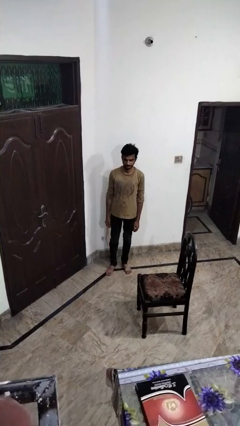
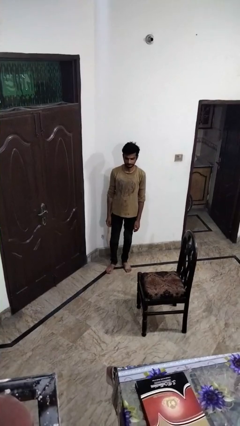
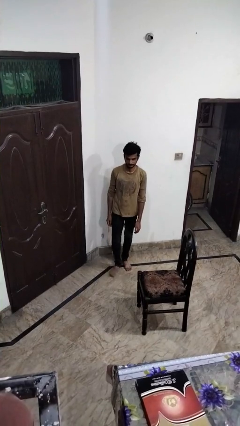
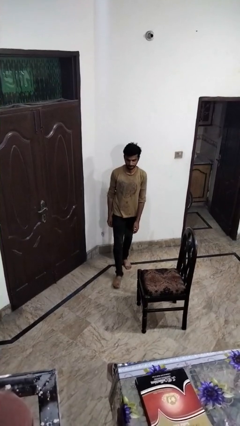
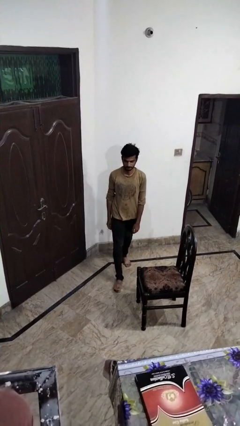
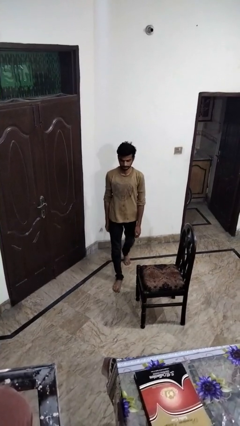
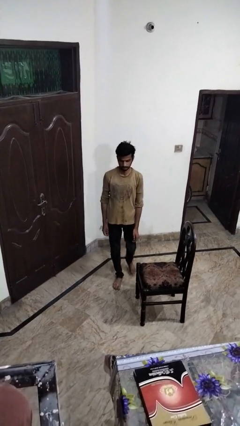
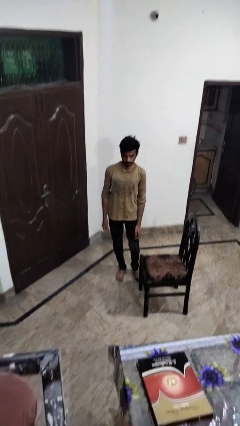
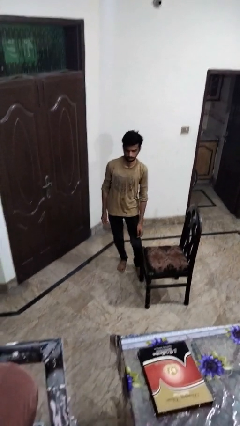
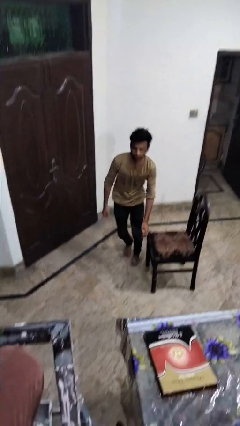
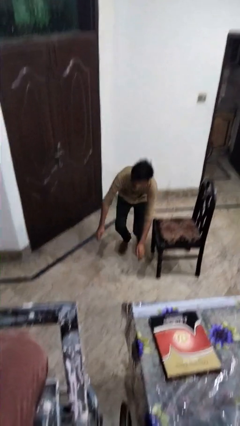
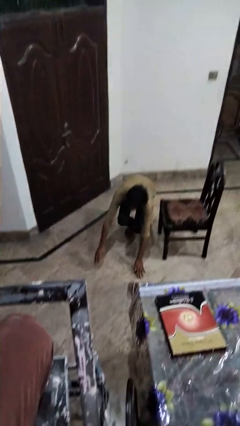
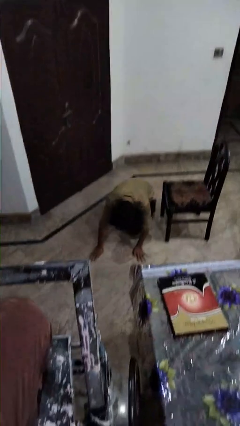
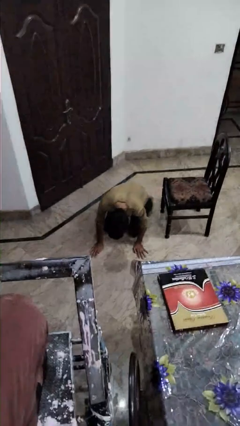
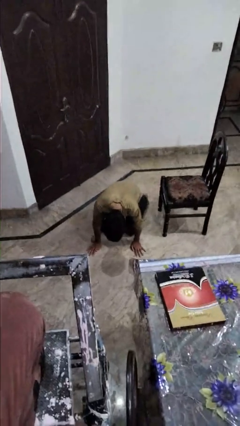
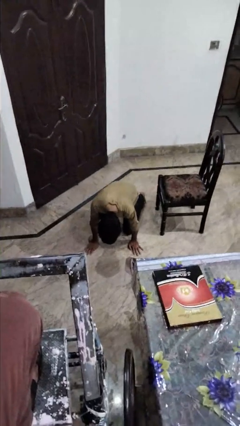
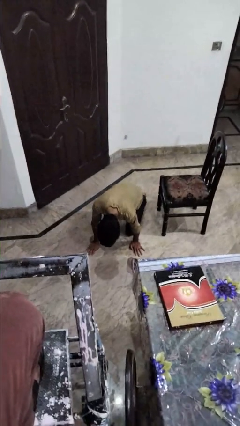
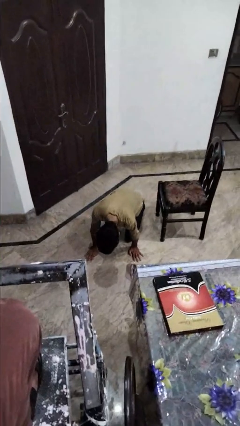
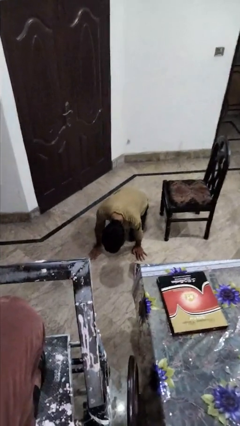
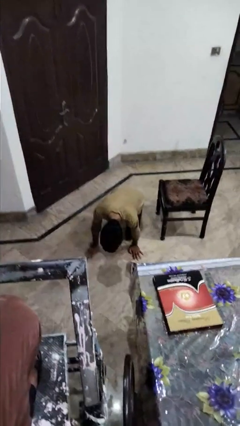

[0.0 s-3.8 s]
person trips on object on floor

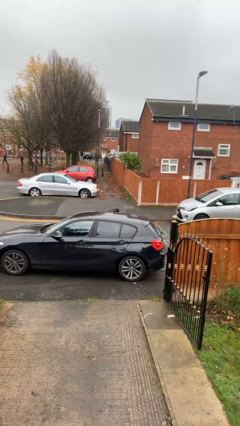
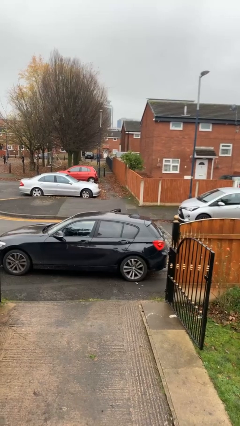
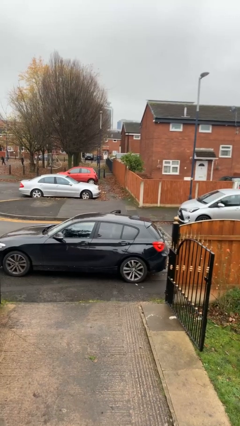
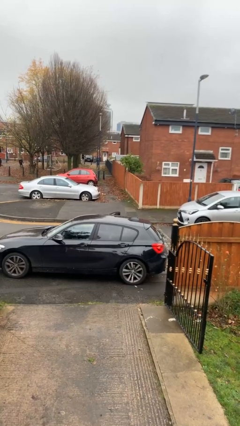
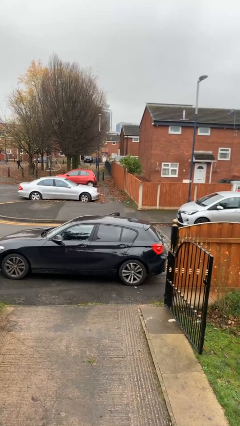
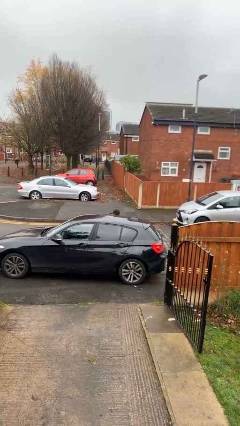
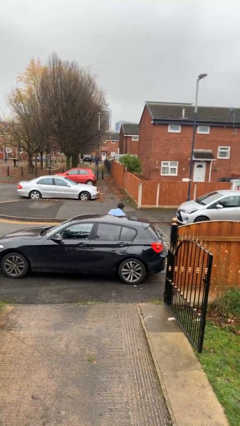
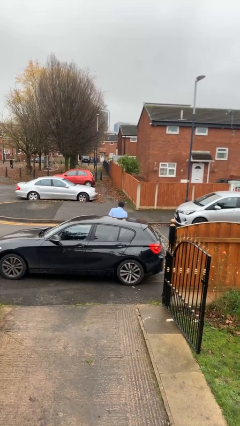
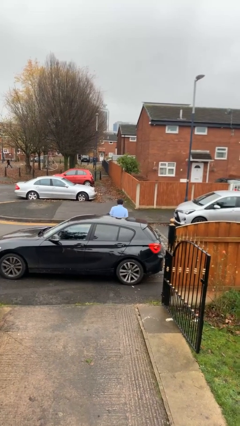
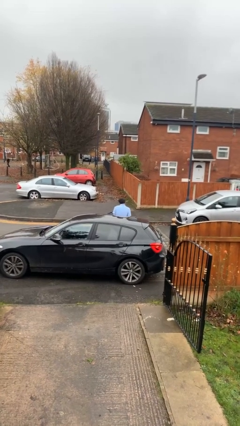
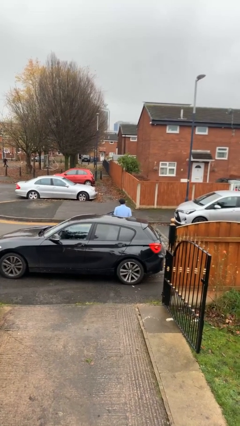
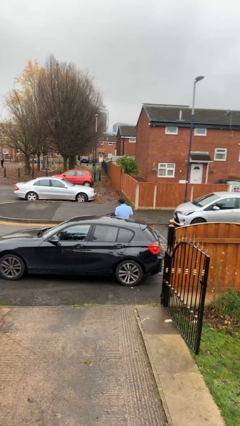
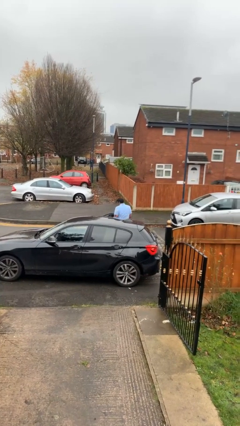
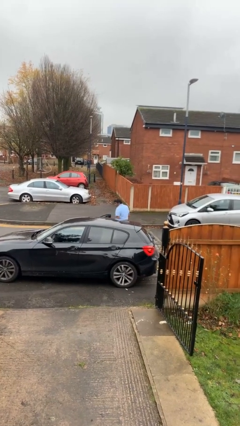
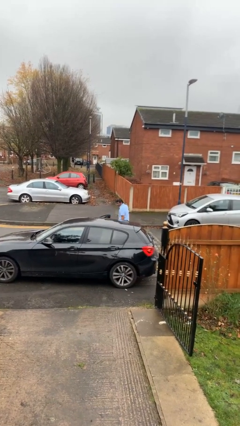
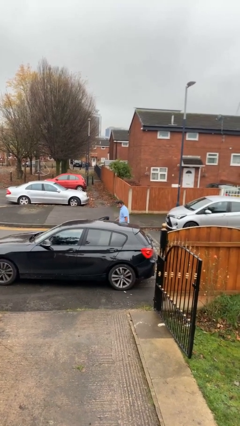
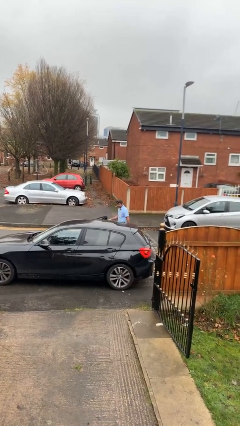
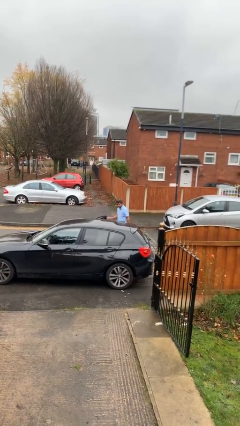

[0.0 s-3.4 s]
person exits car

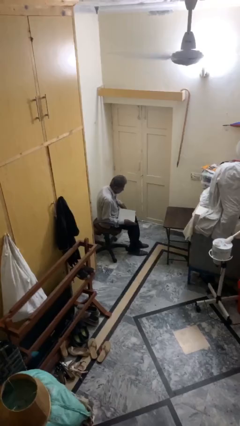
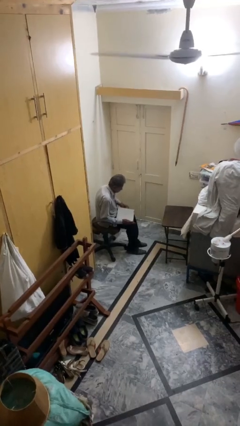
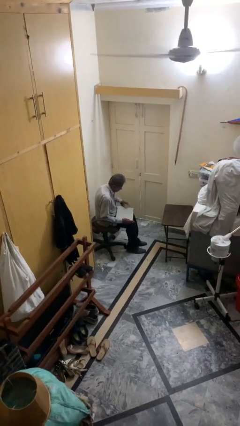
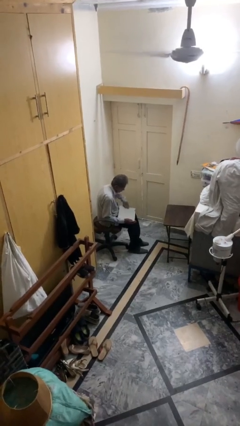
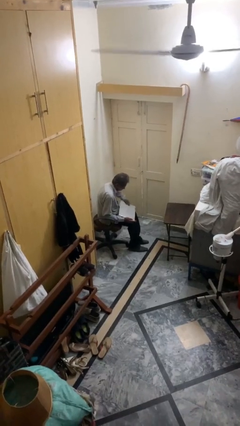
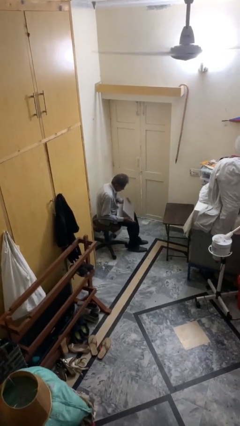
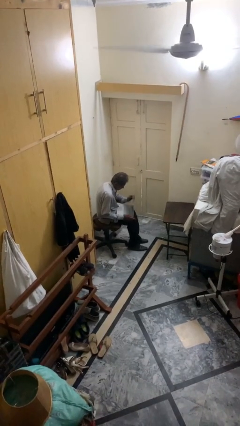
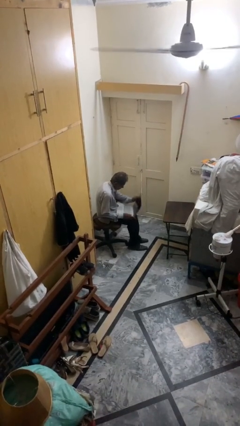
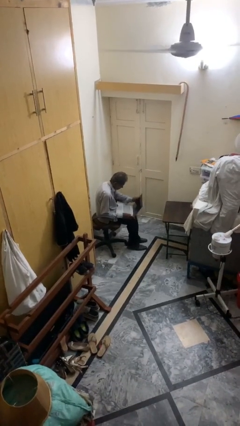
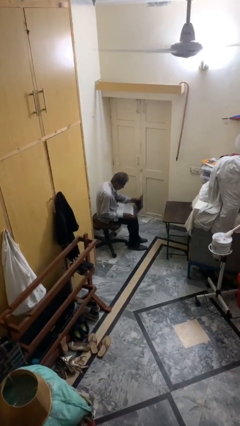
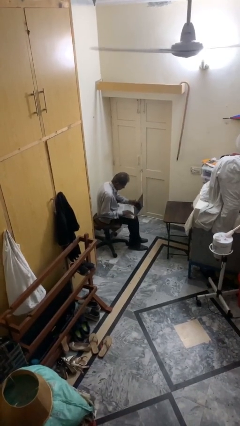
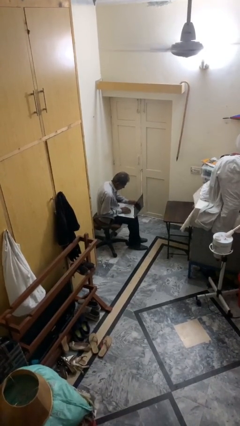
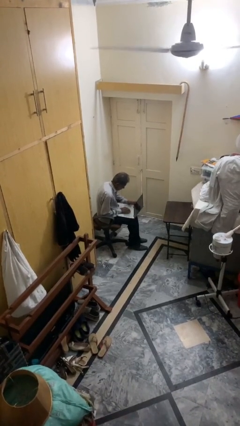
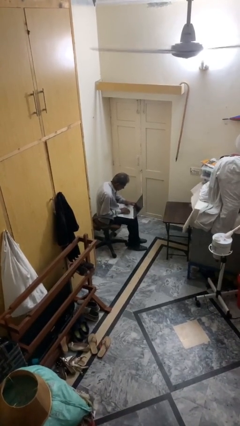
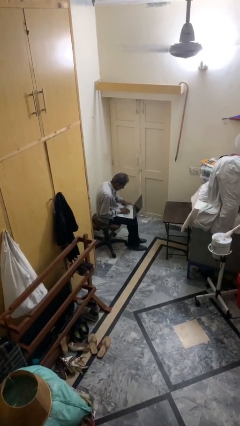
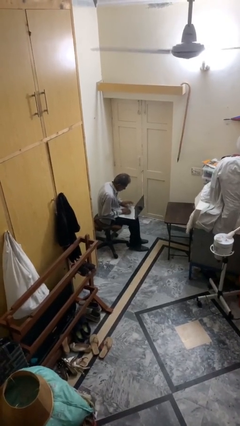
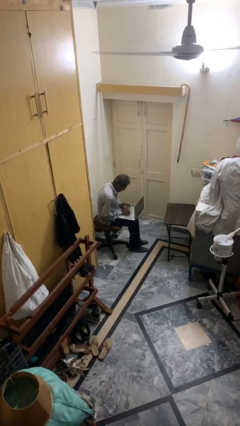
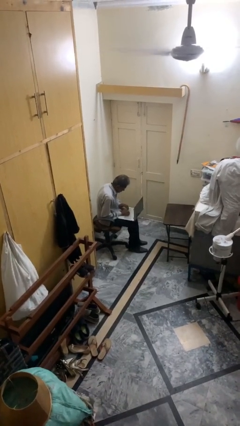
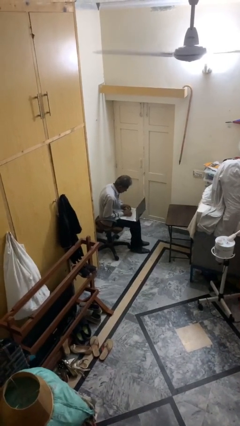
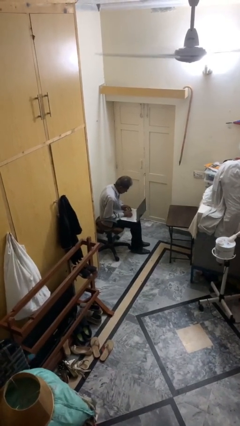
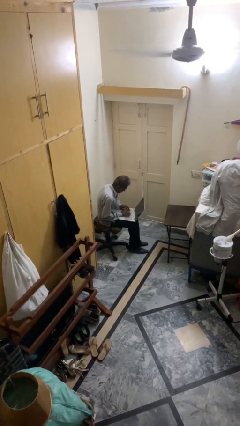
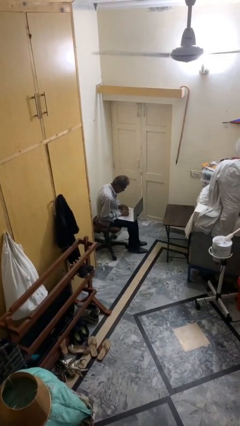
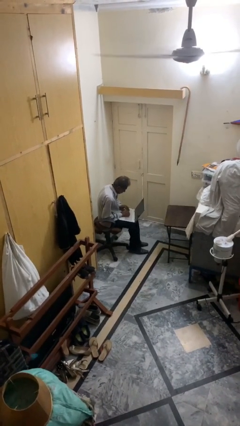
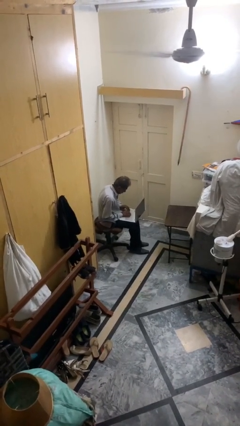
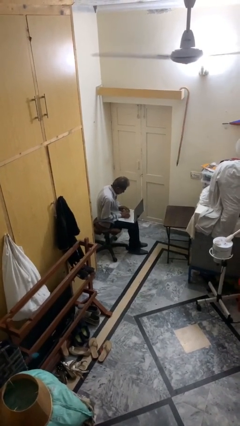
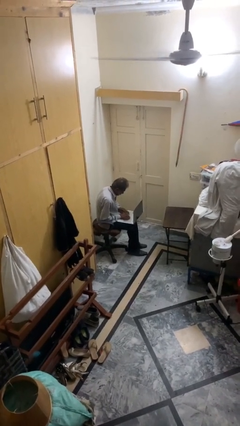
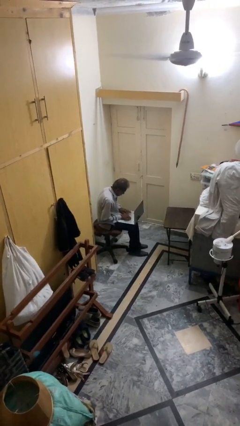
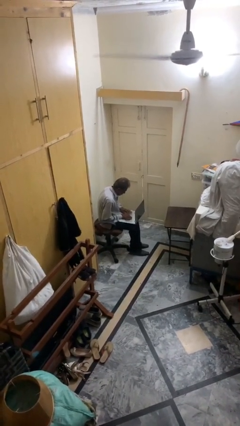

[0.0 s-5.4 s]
person interacts with laptop

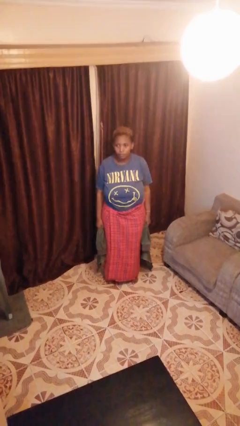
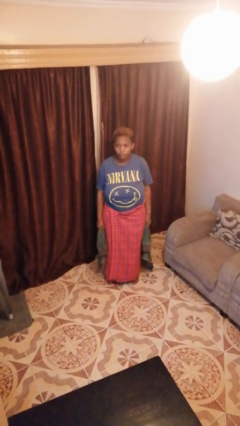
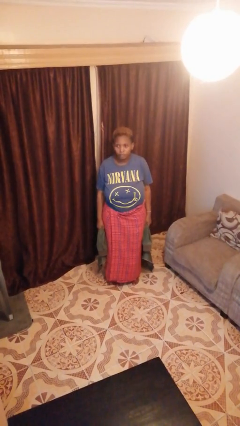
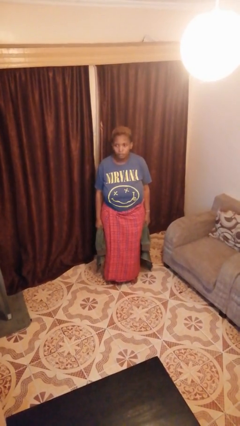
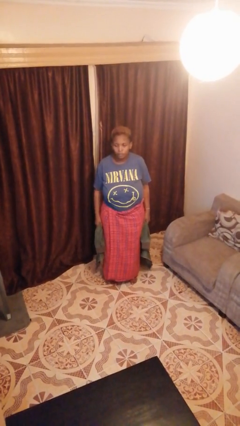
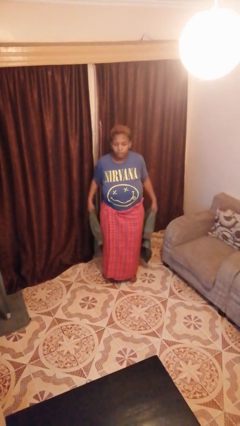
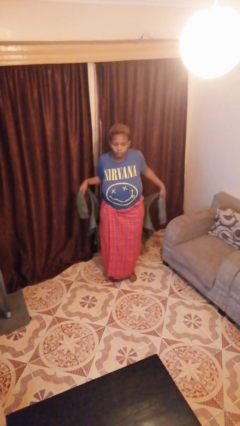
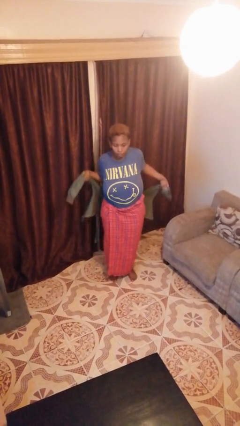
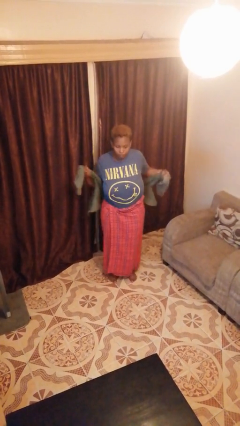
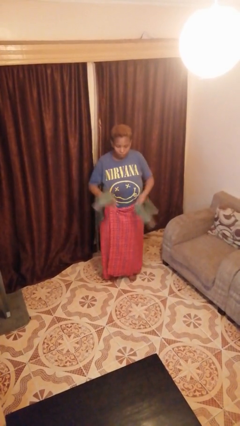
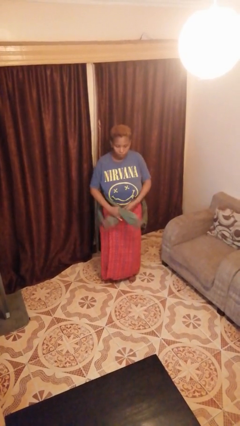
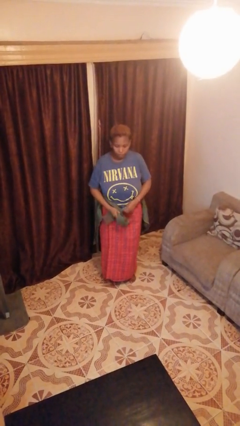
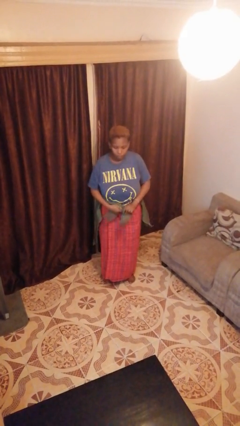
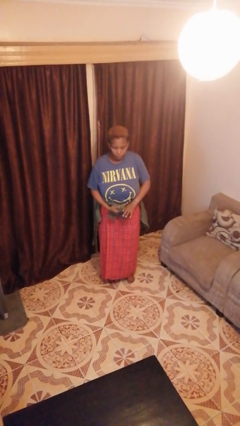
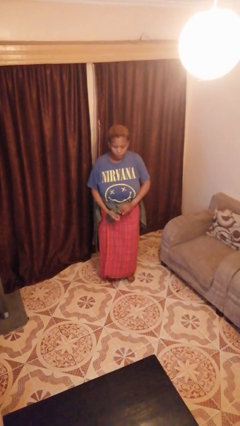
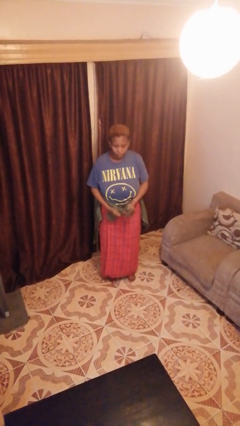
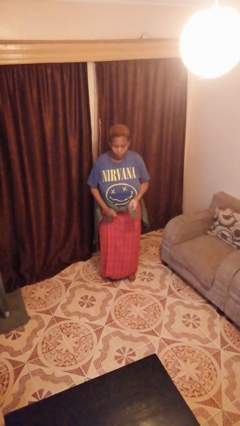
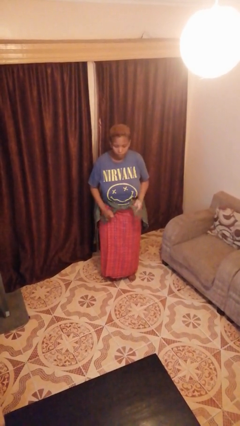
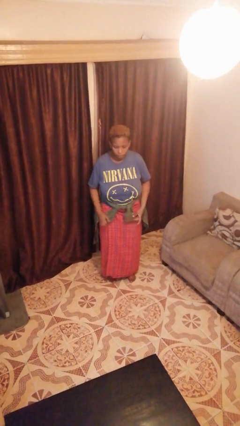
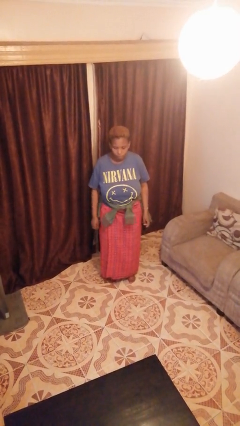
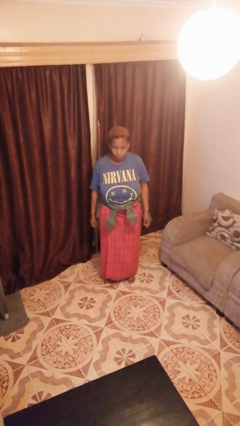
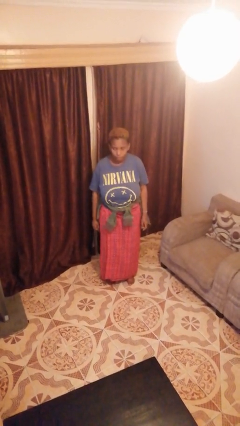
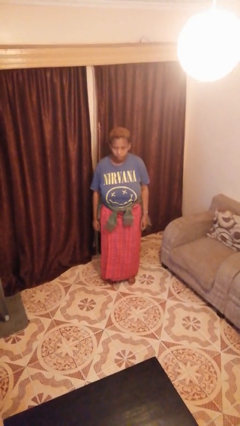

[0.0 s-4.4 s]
person ties jacket around waist

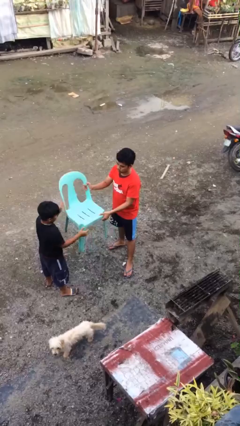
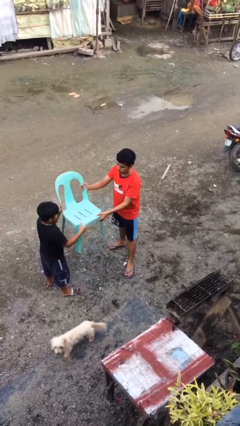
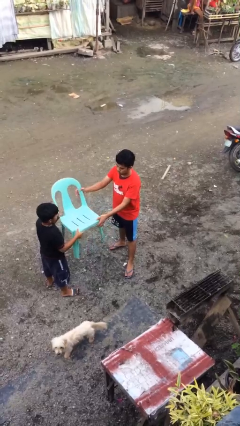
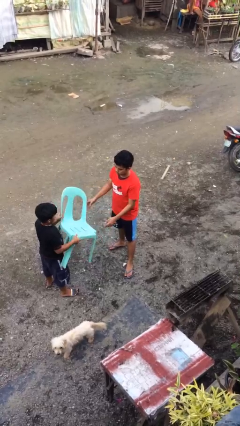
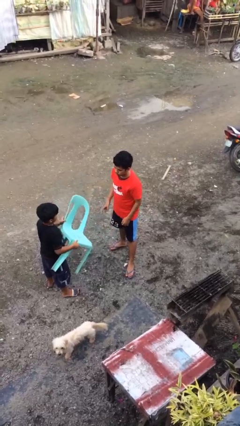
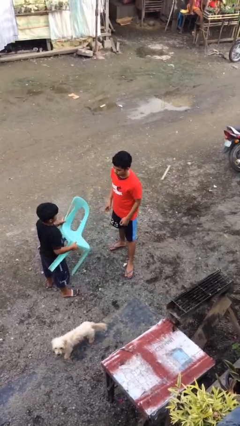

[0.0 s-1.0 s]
person transfers object to person
